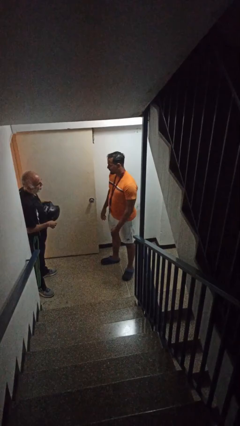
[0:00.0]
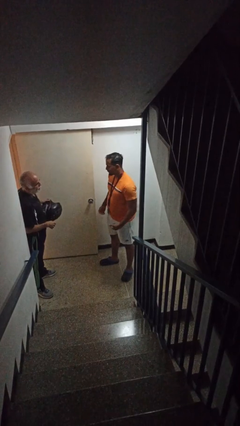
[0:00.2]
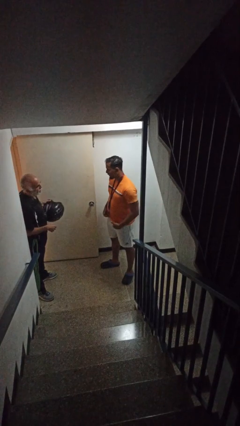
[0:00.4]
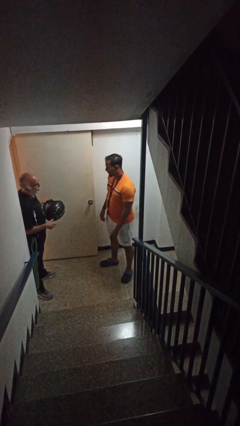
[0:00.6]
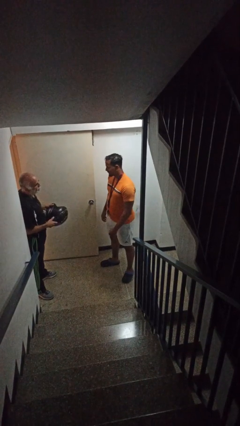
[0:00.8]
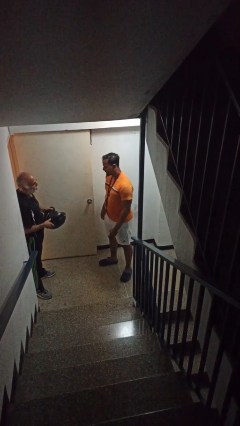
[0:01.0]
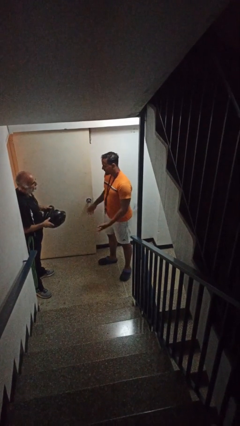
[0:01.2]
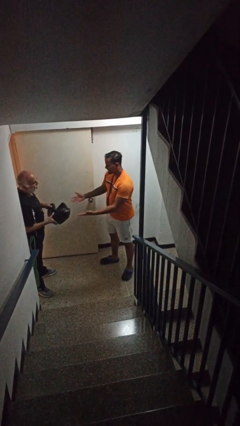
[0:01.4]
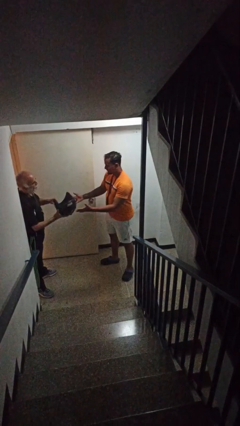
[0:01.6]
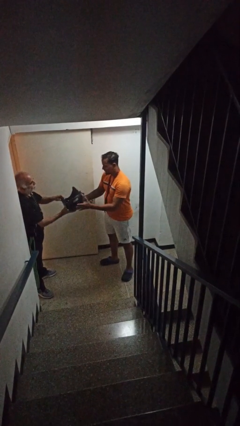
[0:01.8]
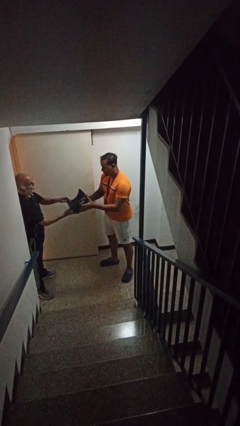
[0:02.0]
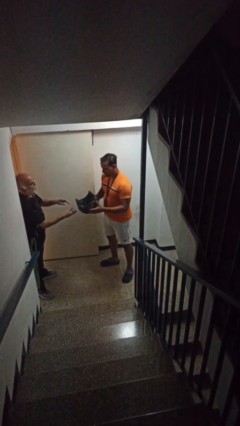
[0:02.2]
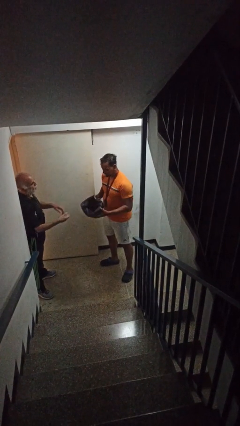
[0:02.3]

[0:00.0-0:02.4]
person transfers object to person

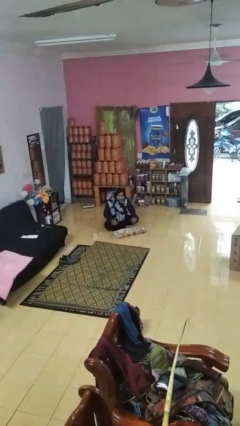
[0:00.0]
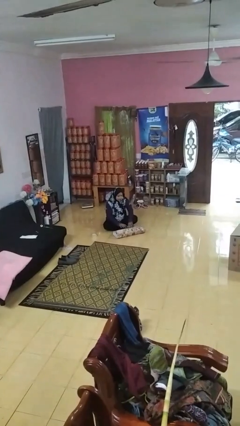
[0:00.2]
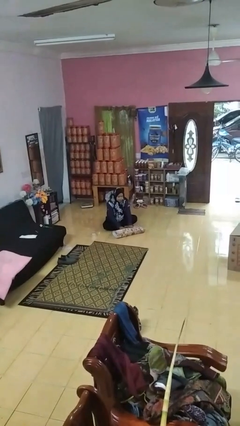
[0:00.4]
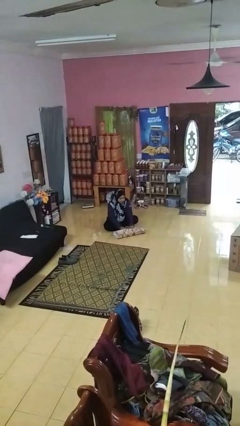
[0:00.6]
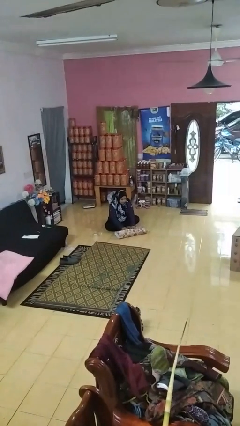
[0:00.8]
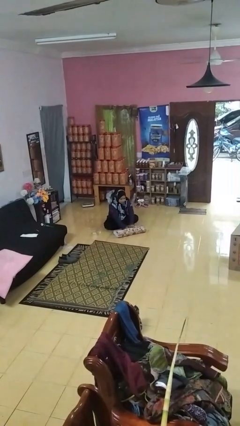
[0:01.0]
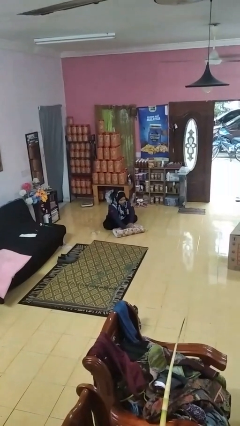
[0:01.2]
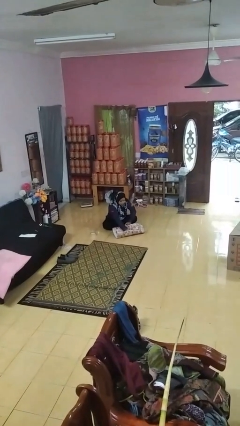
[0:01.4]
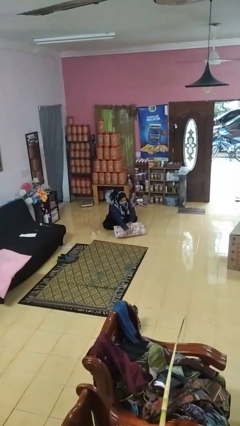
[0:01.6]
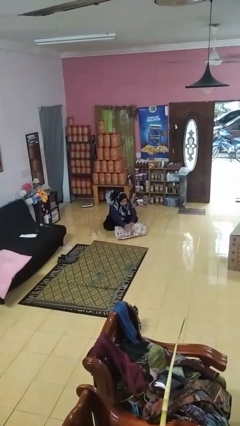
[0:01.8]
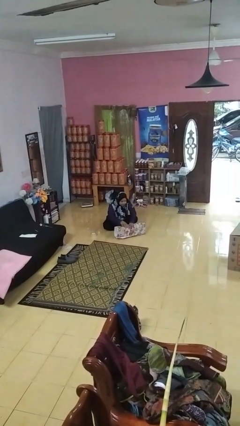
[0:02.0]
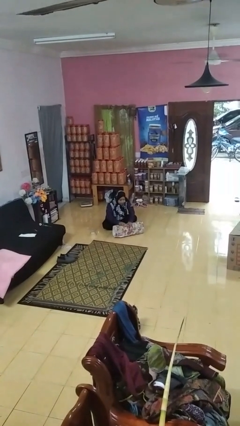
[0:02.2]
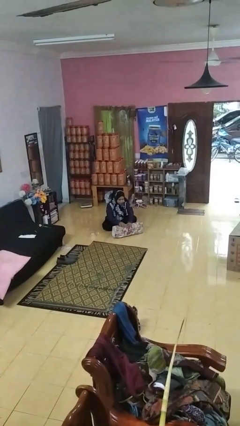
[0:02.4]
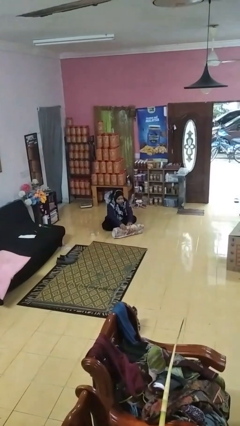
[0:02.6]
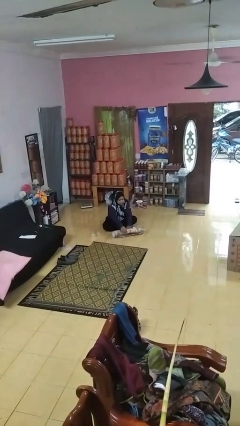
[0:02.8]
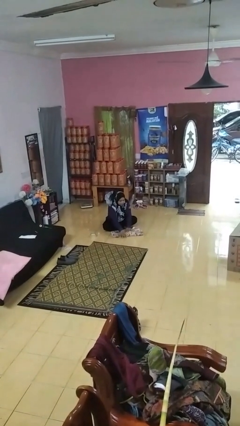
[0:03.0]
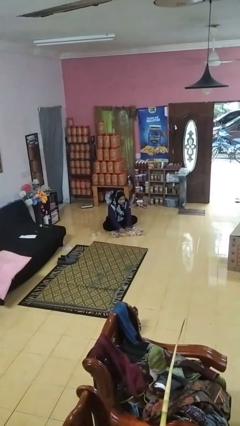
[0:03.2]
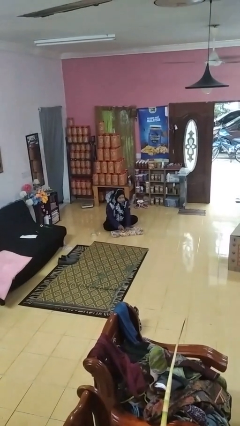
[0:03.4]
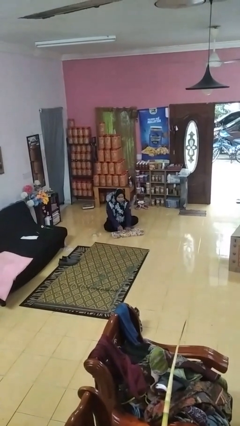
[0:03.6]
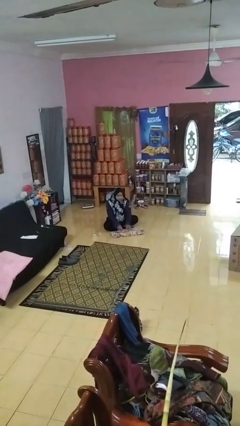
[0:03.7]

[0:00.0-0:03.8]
person wraps box

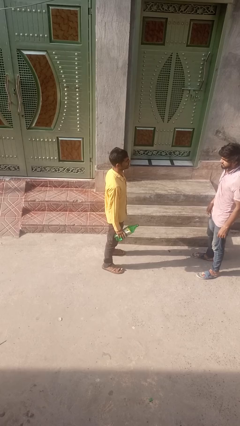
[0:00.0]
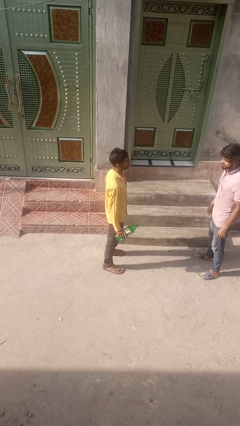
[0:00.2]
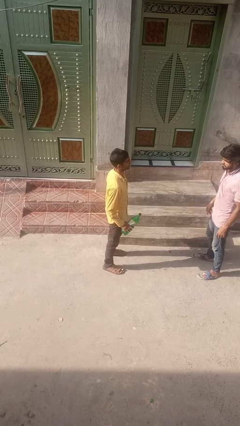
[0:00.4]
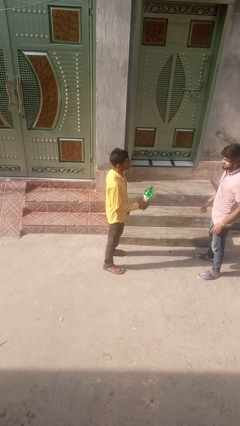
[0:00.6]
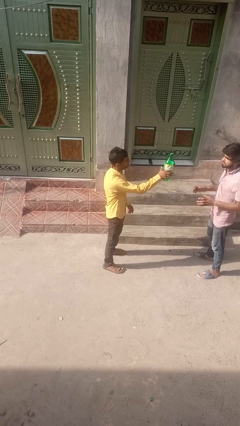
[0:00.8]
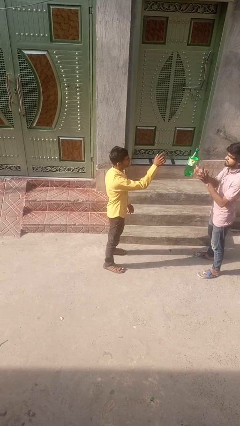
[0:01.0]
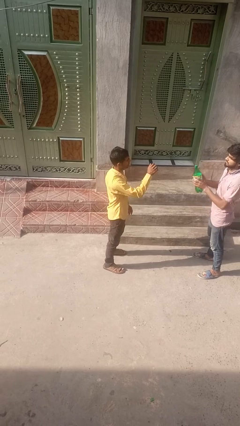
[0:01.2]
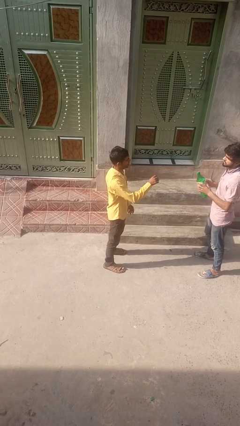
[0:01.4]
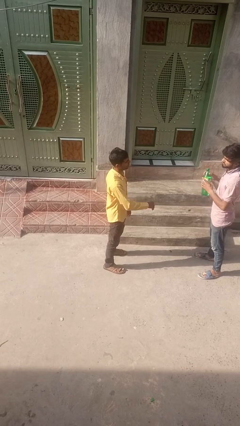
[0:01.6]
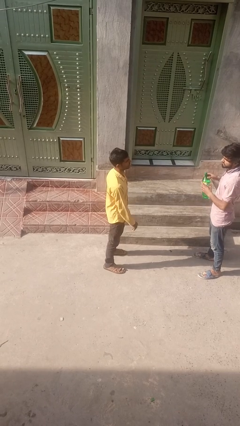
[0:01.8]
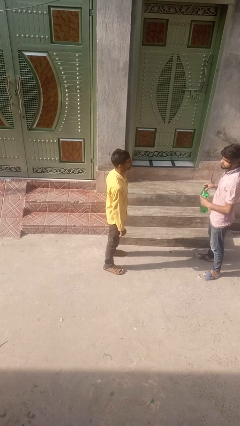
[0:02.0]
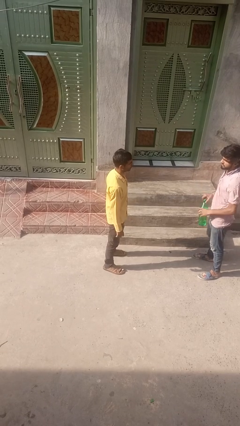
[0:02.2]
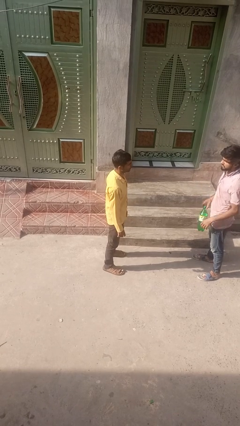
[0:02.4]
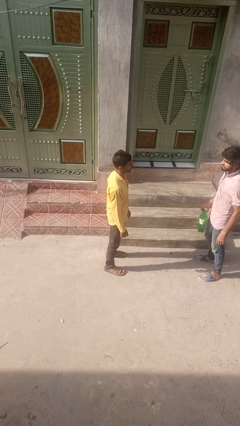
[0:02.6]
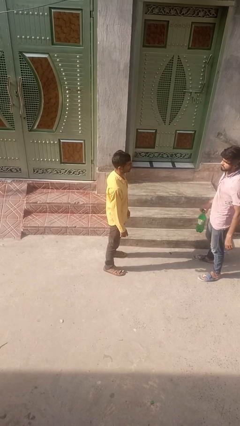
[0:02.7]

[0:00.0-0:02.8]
person throws object to person

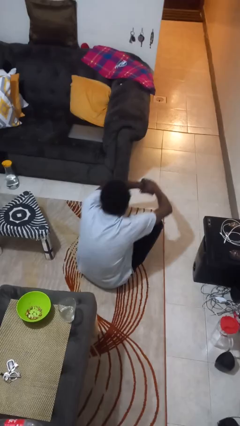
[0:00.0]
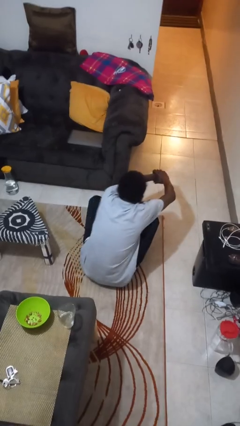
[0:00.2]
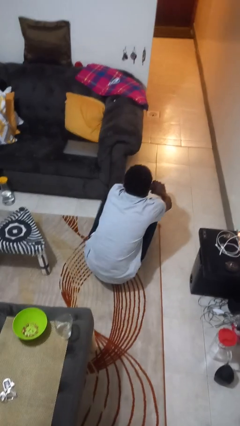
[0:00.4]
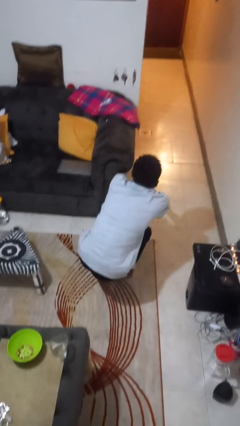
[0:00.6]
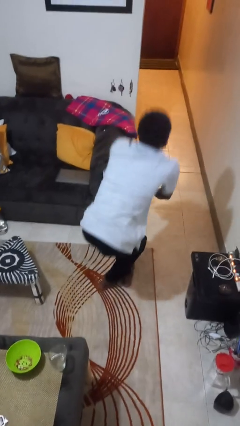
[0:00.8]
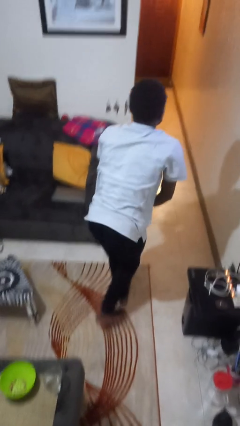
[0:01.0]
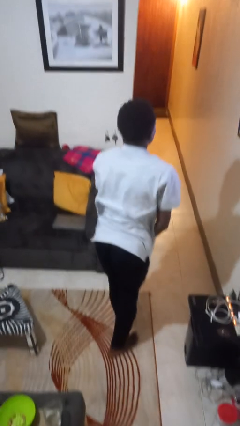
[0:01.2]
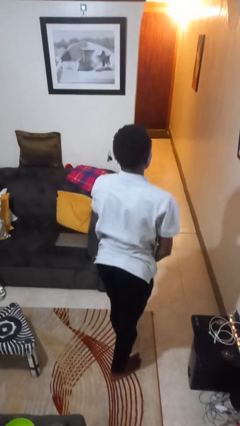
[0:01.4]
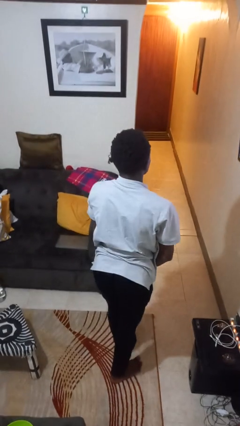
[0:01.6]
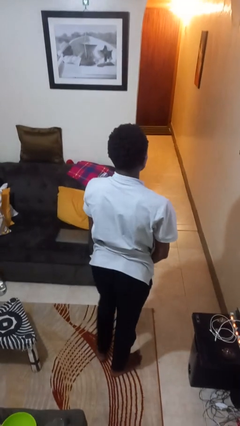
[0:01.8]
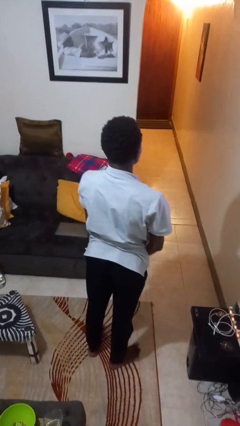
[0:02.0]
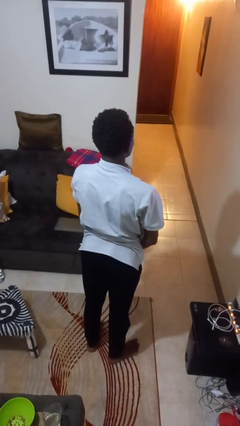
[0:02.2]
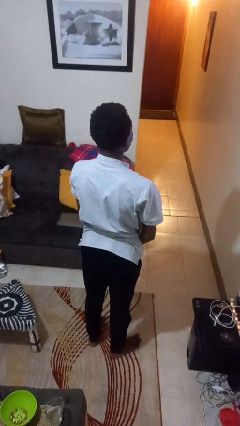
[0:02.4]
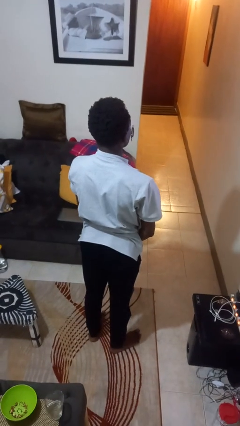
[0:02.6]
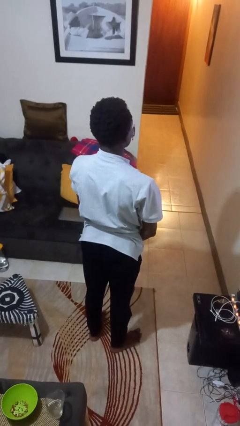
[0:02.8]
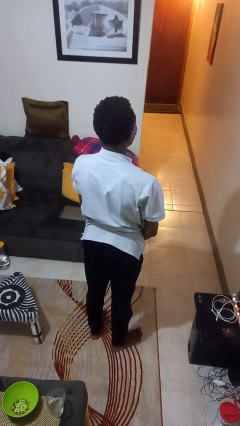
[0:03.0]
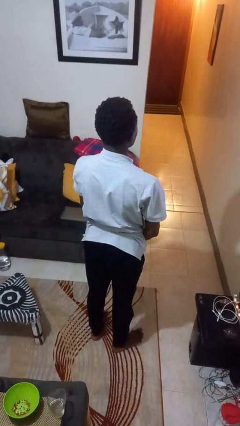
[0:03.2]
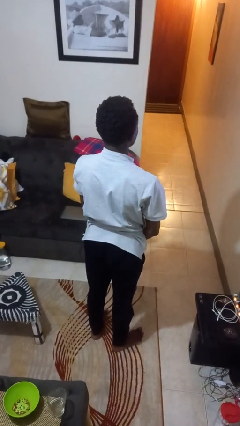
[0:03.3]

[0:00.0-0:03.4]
person stands up from floor

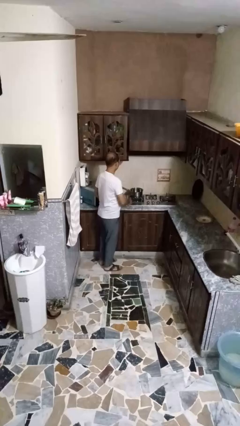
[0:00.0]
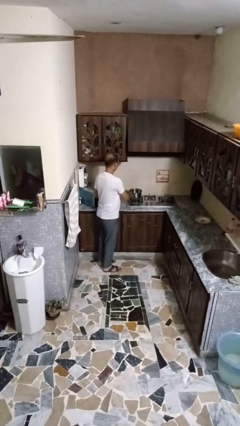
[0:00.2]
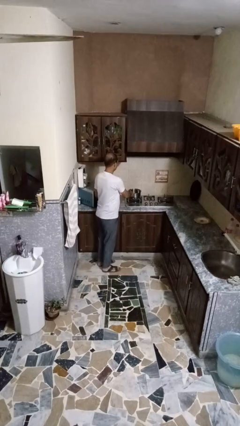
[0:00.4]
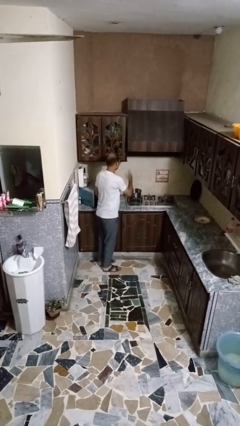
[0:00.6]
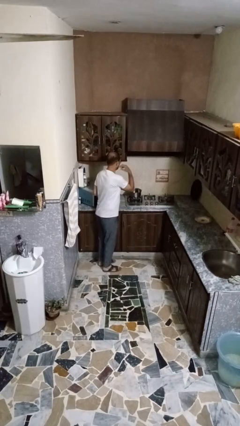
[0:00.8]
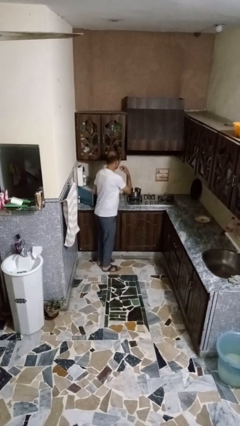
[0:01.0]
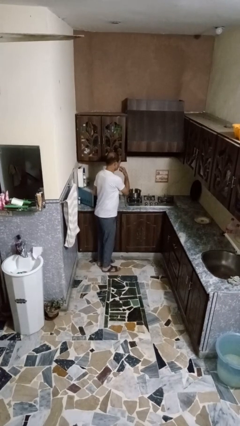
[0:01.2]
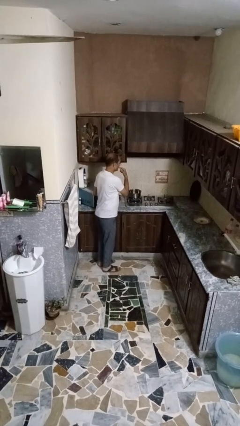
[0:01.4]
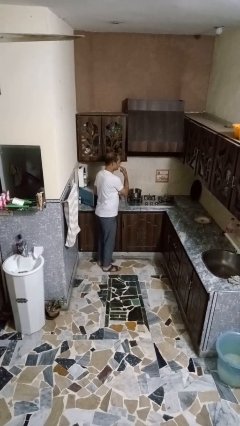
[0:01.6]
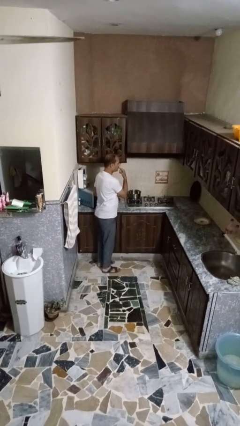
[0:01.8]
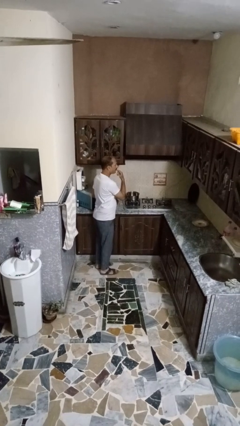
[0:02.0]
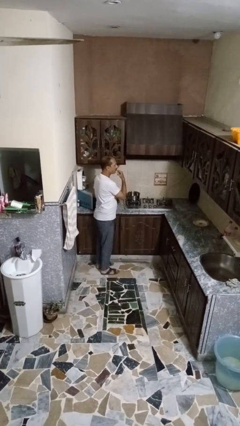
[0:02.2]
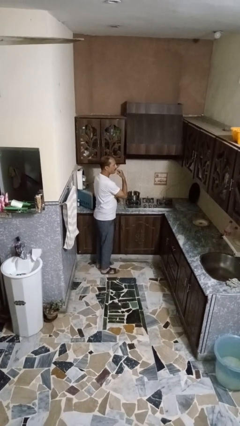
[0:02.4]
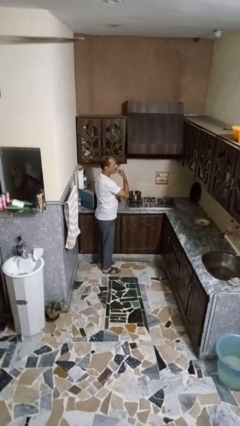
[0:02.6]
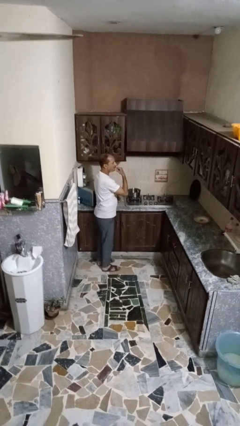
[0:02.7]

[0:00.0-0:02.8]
person burns hand

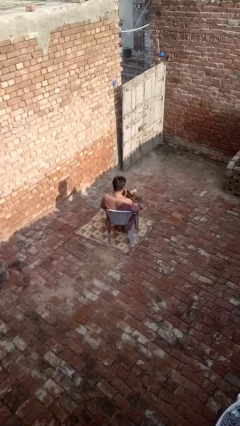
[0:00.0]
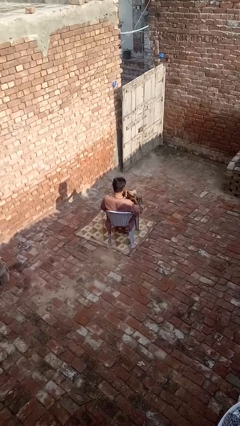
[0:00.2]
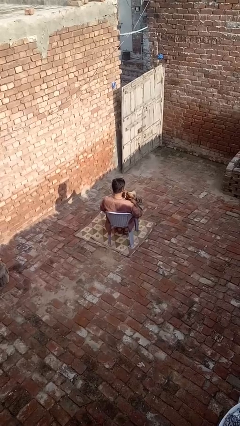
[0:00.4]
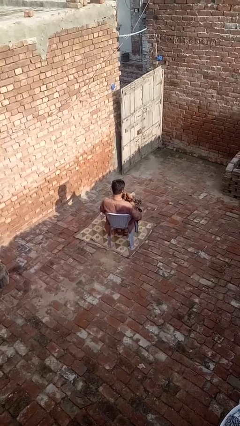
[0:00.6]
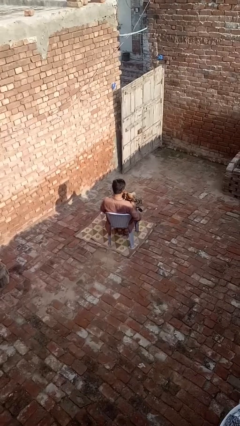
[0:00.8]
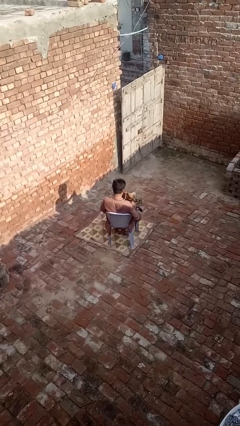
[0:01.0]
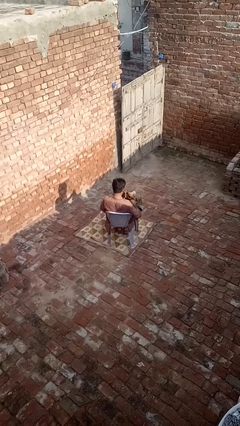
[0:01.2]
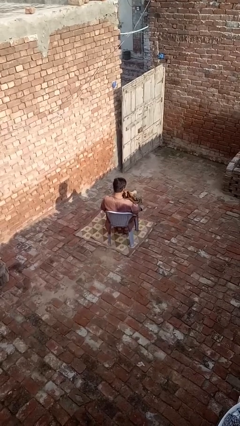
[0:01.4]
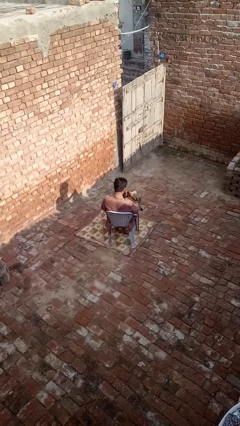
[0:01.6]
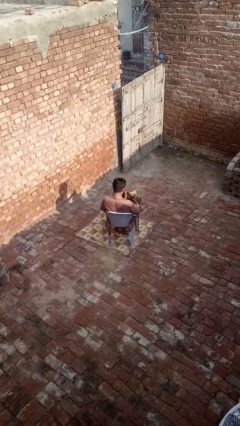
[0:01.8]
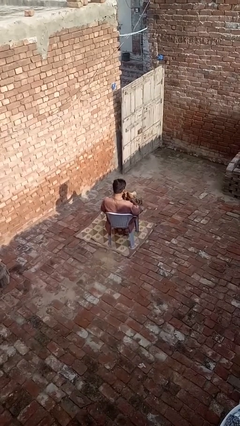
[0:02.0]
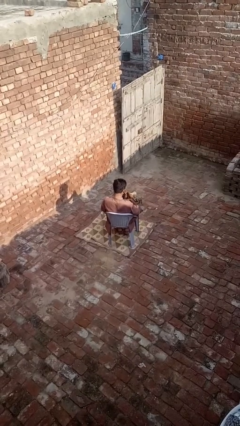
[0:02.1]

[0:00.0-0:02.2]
person searches in purse
